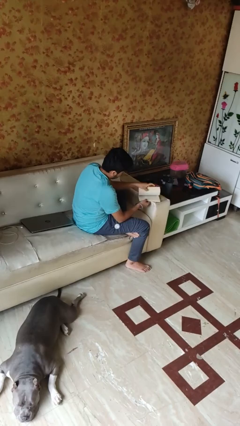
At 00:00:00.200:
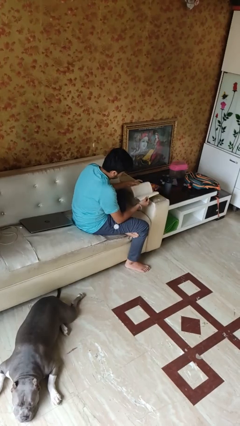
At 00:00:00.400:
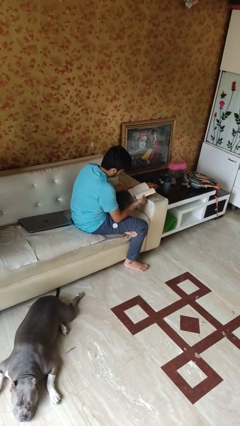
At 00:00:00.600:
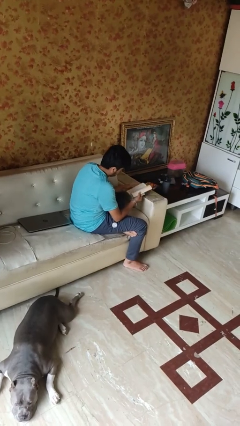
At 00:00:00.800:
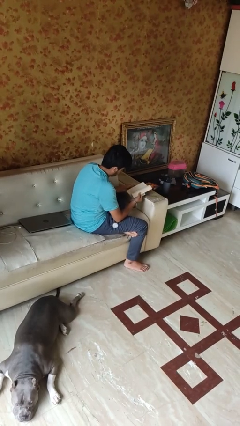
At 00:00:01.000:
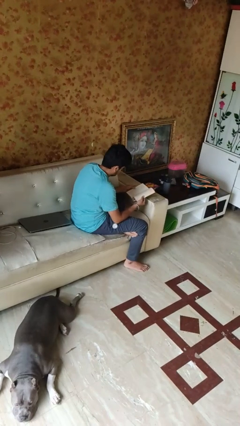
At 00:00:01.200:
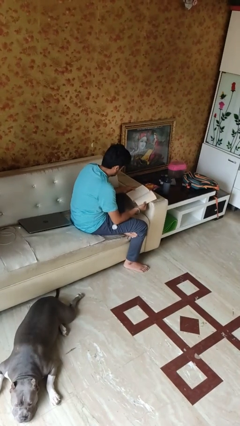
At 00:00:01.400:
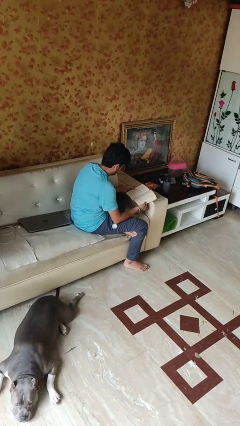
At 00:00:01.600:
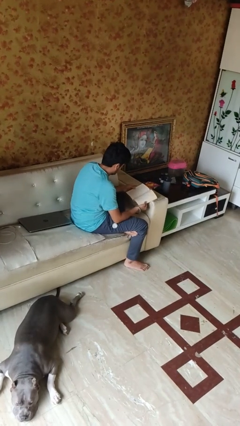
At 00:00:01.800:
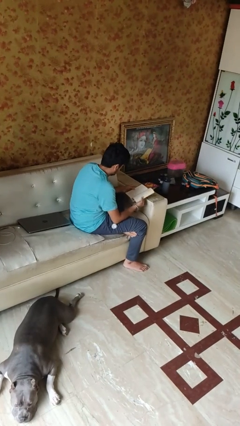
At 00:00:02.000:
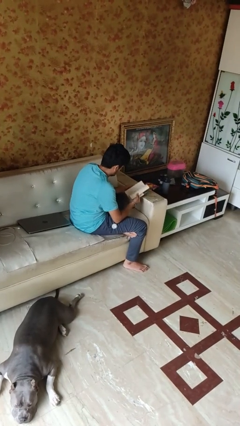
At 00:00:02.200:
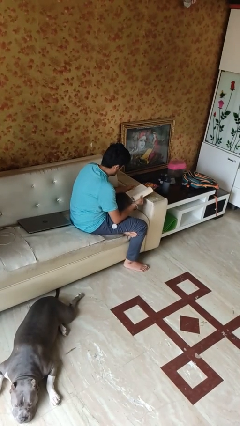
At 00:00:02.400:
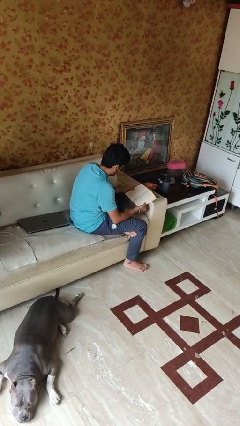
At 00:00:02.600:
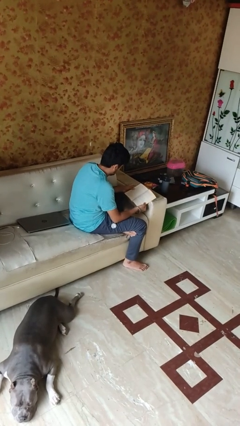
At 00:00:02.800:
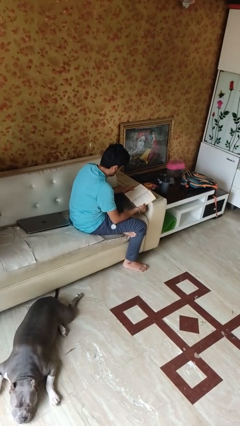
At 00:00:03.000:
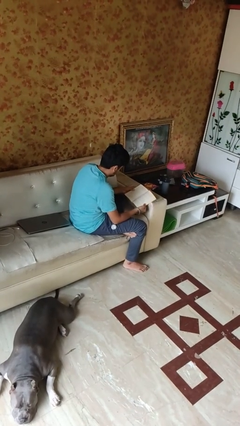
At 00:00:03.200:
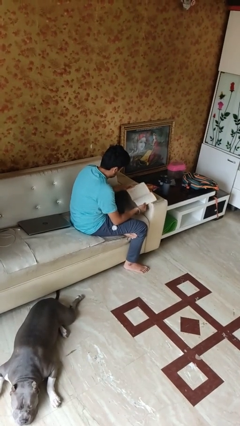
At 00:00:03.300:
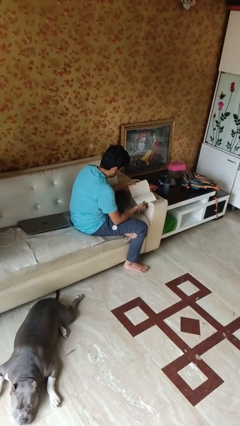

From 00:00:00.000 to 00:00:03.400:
person reads book

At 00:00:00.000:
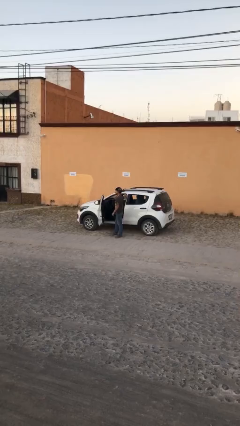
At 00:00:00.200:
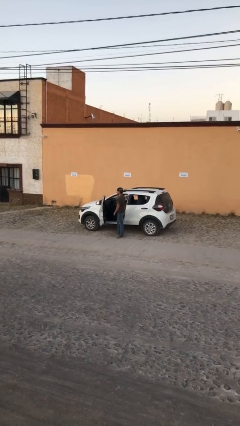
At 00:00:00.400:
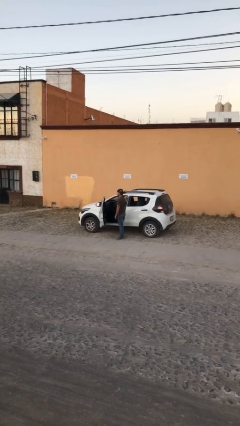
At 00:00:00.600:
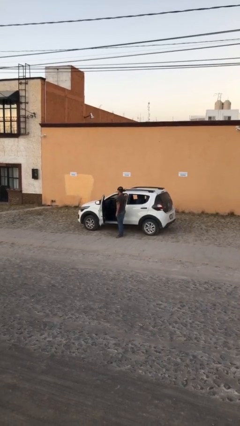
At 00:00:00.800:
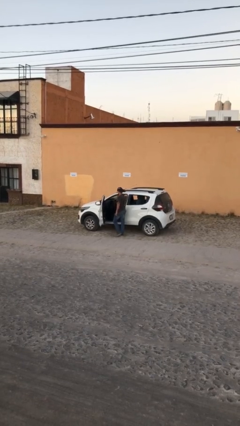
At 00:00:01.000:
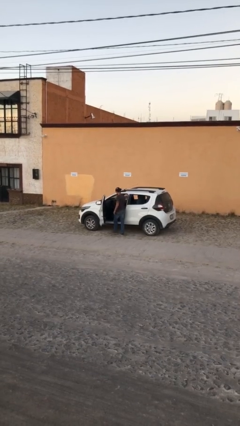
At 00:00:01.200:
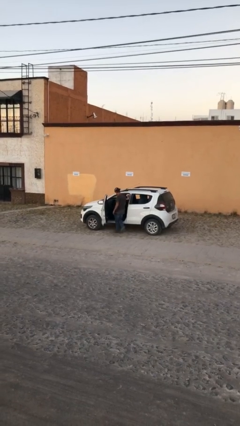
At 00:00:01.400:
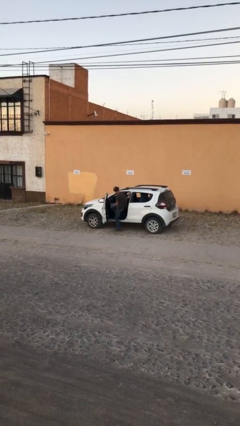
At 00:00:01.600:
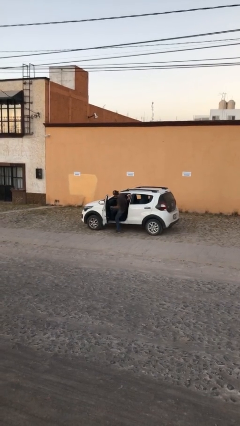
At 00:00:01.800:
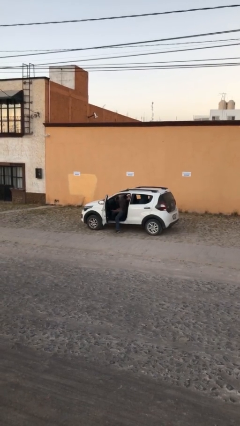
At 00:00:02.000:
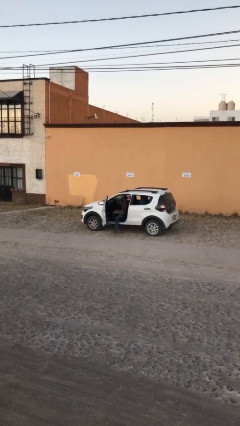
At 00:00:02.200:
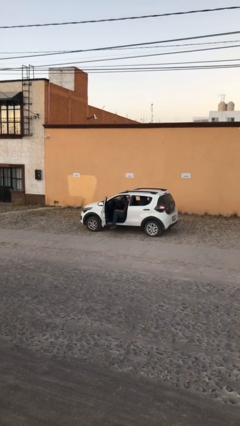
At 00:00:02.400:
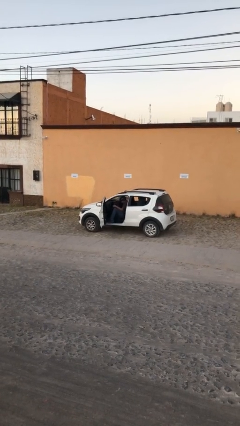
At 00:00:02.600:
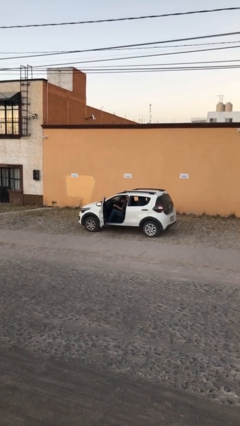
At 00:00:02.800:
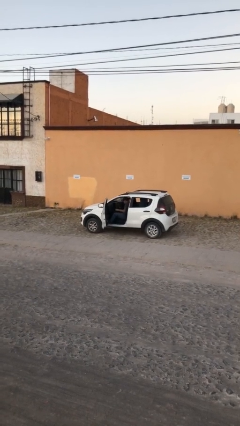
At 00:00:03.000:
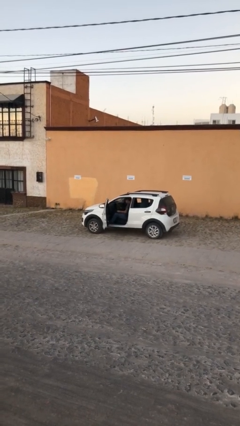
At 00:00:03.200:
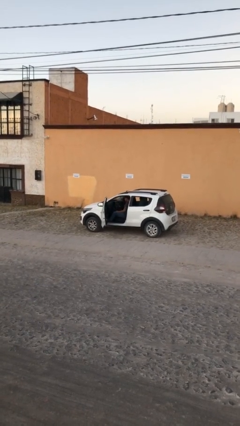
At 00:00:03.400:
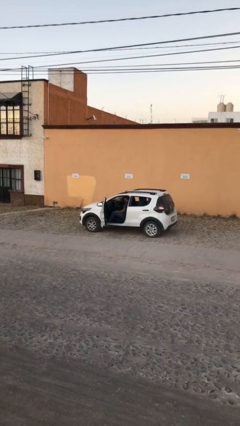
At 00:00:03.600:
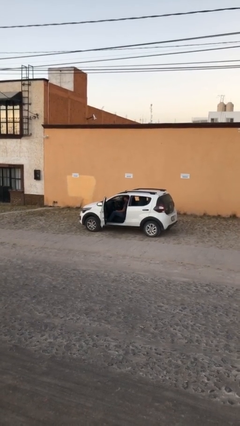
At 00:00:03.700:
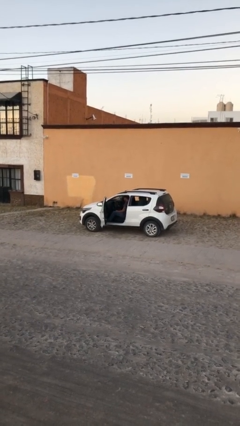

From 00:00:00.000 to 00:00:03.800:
person enters car

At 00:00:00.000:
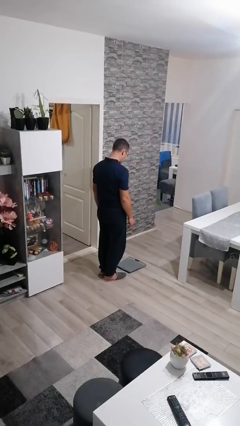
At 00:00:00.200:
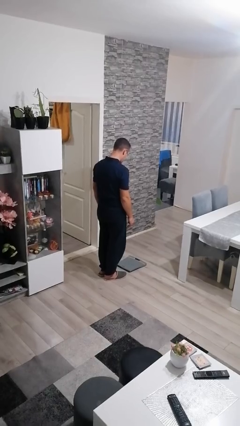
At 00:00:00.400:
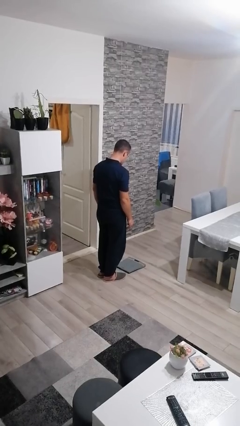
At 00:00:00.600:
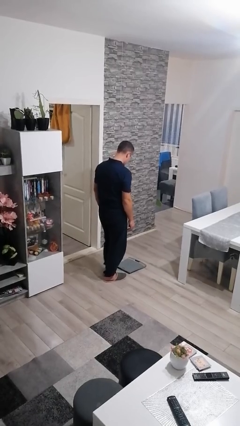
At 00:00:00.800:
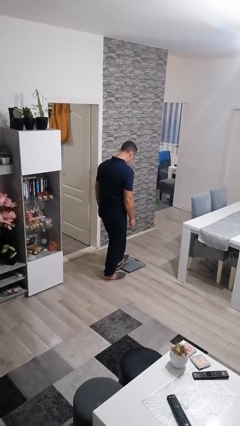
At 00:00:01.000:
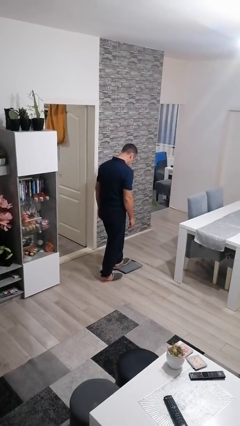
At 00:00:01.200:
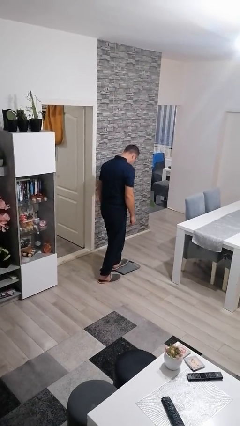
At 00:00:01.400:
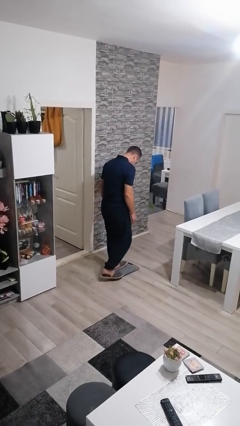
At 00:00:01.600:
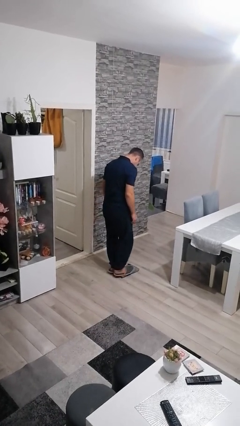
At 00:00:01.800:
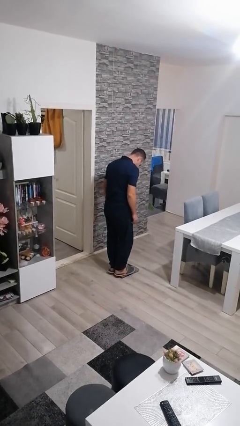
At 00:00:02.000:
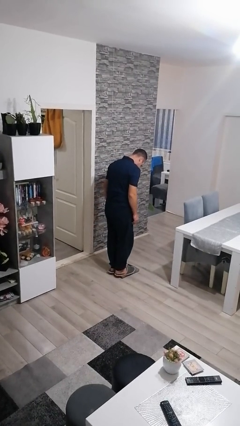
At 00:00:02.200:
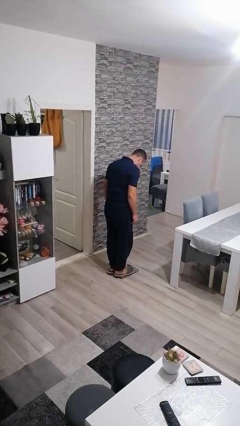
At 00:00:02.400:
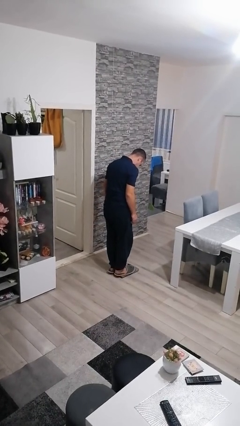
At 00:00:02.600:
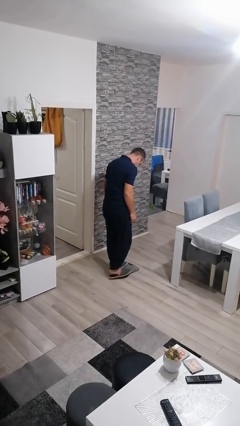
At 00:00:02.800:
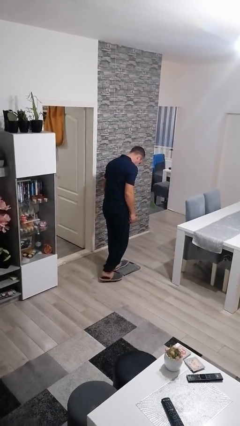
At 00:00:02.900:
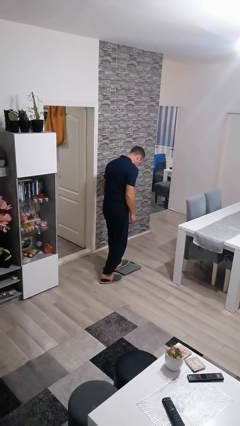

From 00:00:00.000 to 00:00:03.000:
person uses bodyweight scale

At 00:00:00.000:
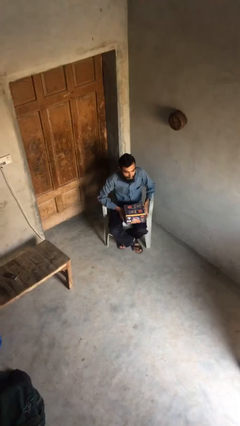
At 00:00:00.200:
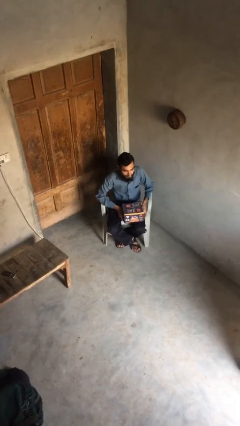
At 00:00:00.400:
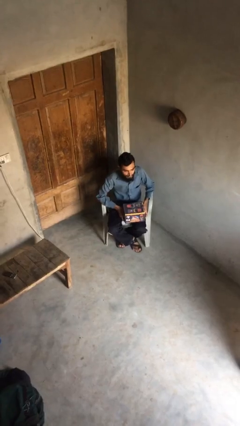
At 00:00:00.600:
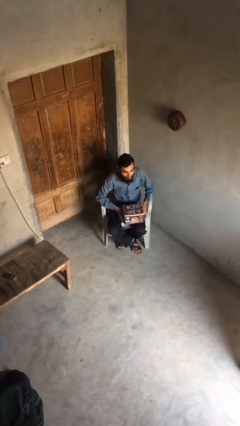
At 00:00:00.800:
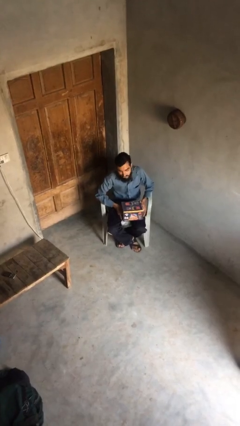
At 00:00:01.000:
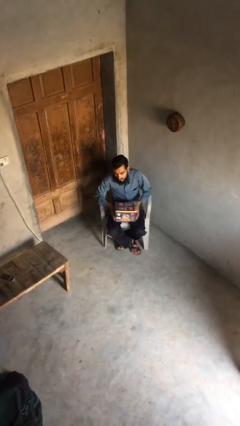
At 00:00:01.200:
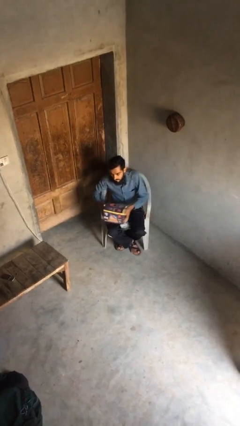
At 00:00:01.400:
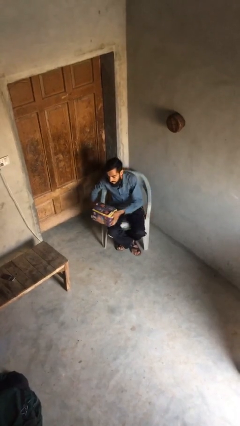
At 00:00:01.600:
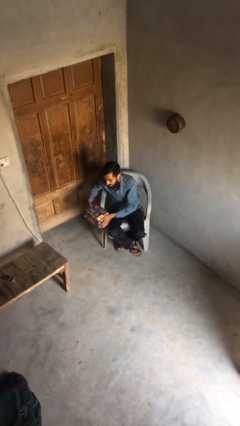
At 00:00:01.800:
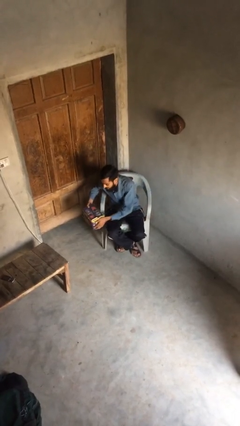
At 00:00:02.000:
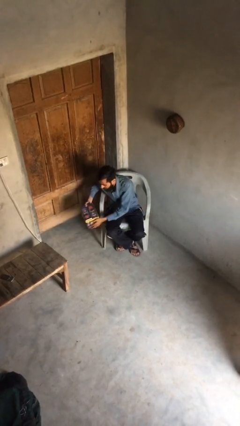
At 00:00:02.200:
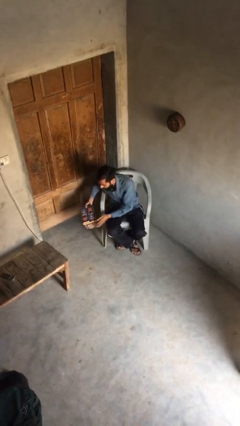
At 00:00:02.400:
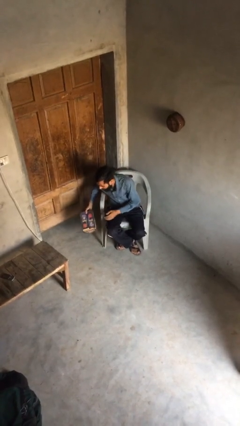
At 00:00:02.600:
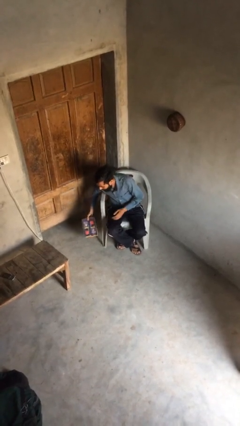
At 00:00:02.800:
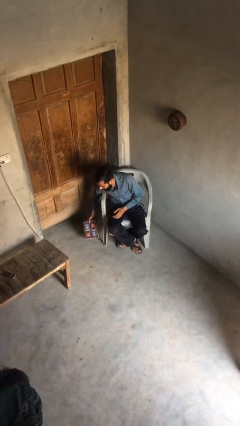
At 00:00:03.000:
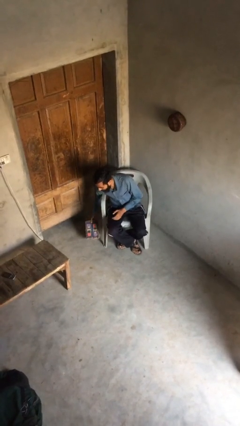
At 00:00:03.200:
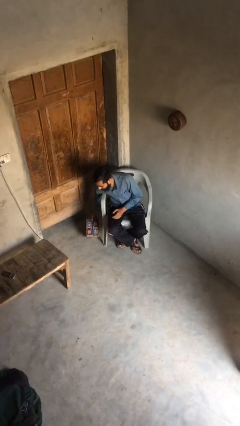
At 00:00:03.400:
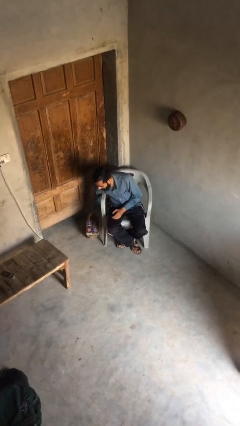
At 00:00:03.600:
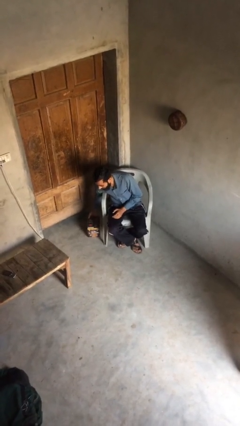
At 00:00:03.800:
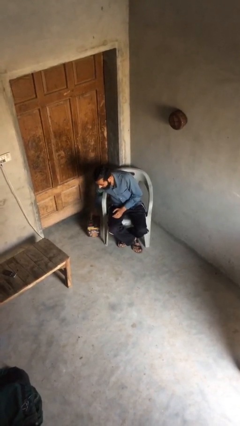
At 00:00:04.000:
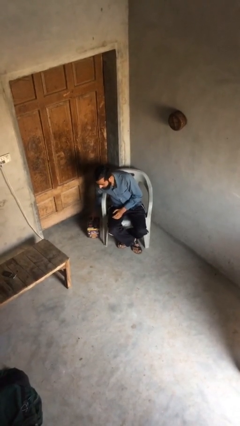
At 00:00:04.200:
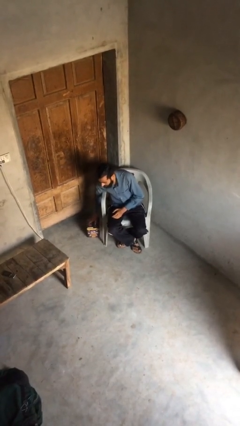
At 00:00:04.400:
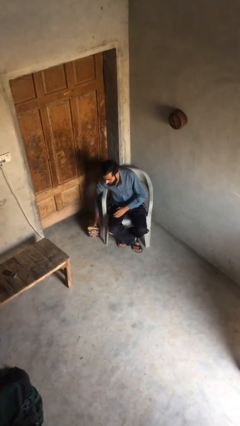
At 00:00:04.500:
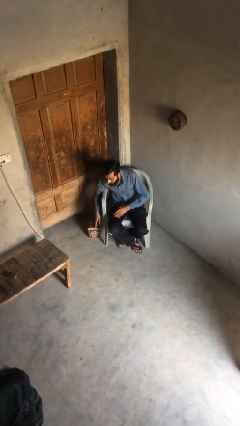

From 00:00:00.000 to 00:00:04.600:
person puts down object on floor

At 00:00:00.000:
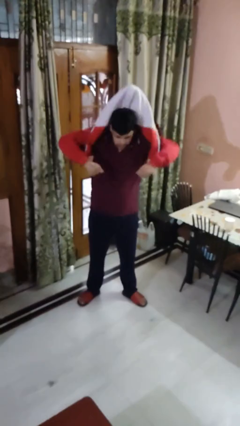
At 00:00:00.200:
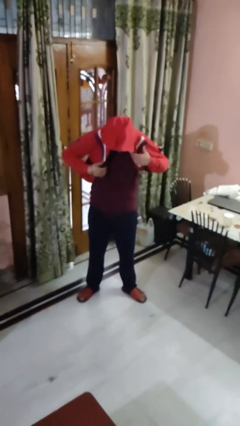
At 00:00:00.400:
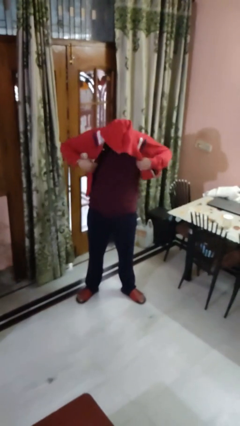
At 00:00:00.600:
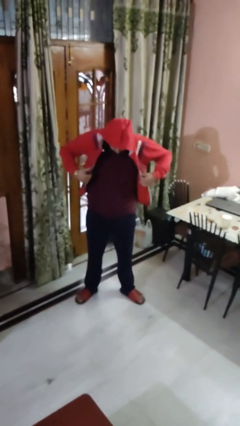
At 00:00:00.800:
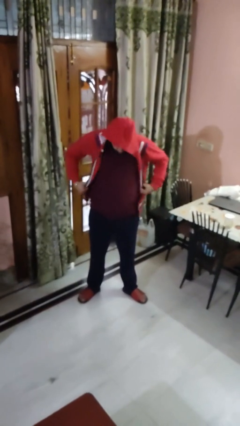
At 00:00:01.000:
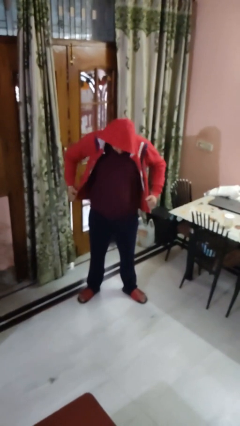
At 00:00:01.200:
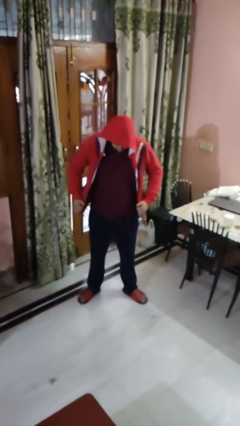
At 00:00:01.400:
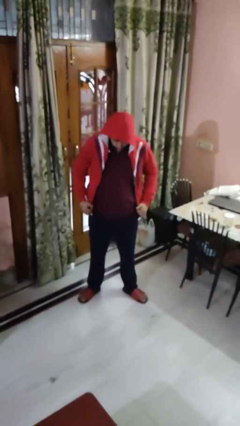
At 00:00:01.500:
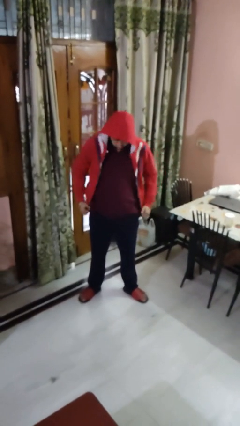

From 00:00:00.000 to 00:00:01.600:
person puts on hoodie

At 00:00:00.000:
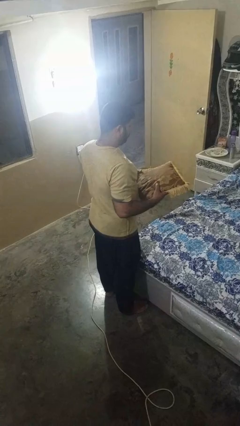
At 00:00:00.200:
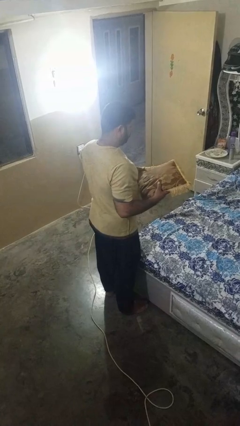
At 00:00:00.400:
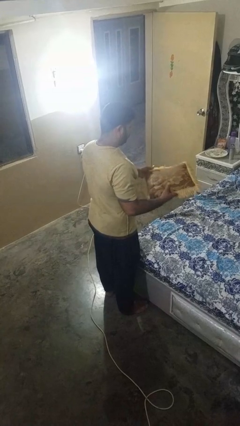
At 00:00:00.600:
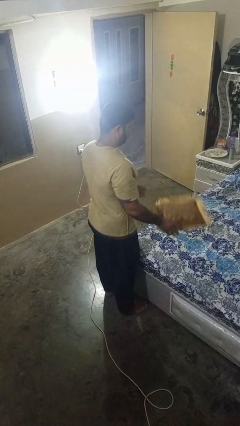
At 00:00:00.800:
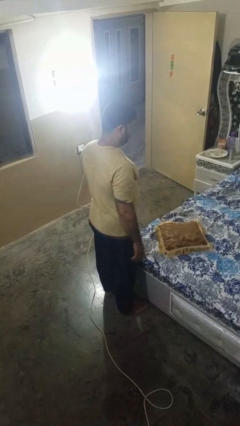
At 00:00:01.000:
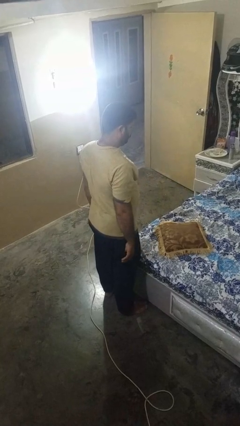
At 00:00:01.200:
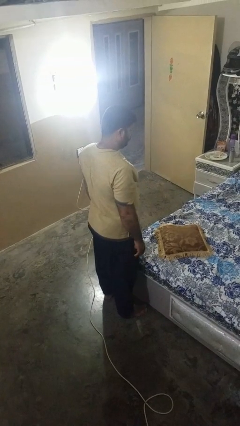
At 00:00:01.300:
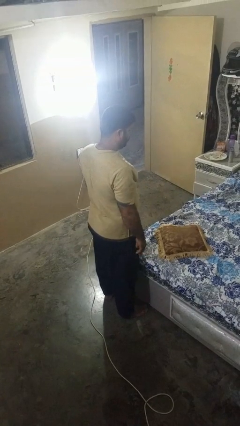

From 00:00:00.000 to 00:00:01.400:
person puts down object on bed
